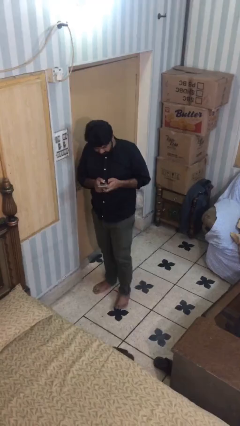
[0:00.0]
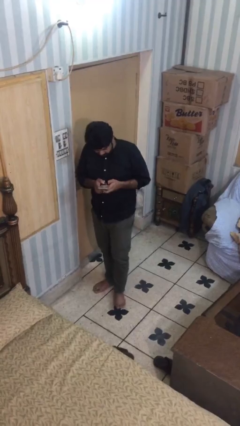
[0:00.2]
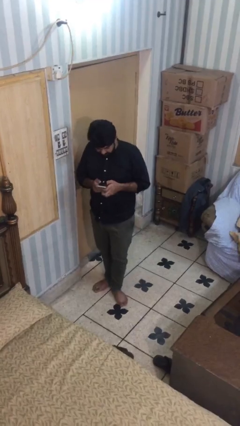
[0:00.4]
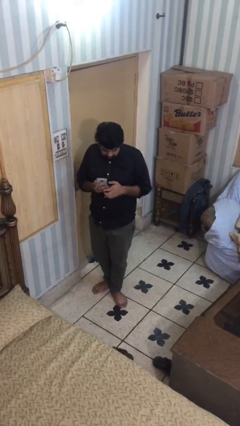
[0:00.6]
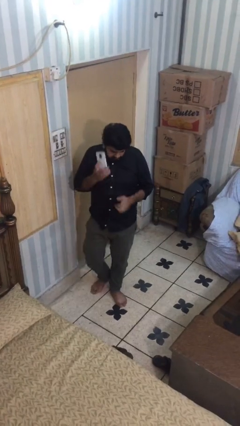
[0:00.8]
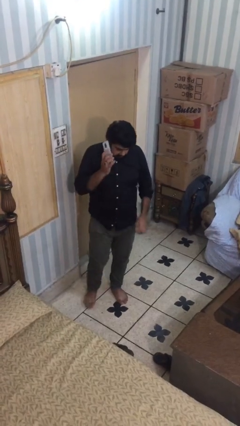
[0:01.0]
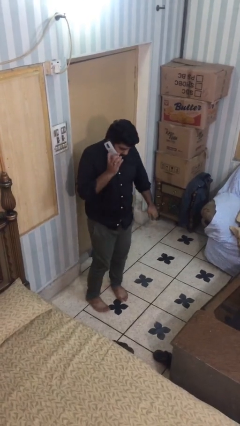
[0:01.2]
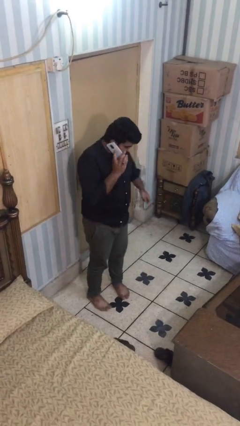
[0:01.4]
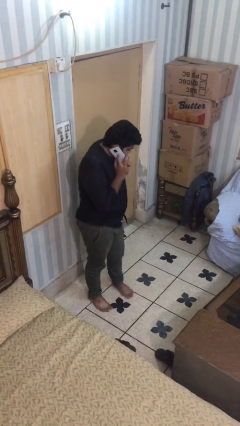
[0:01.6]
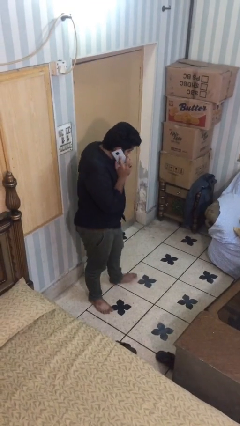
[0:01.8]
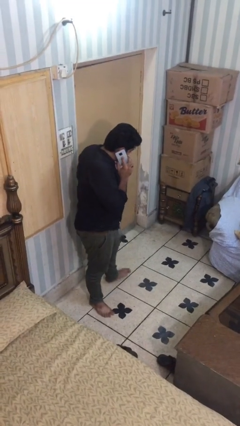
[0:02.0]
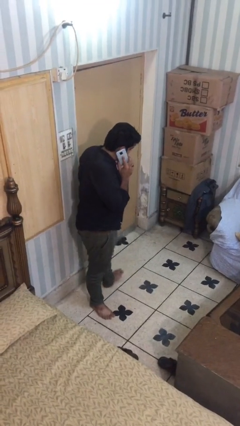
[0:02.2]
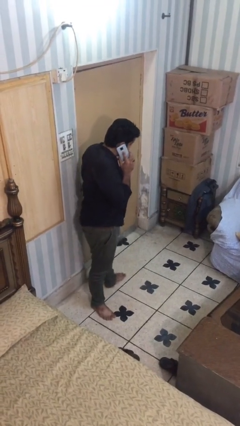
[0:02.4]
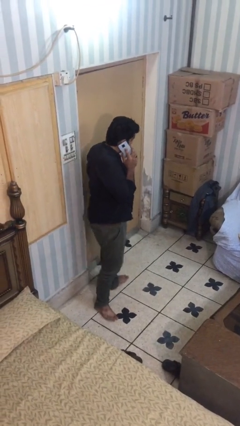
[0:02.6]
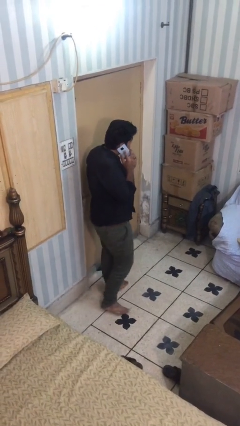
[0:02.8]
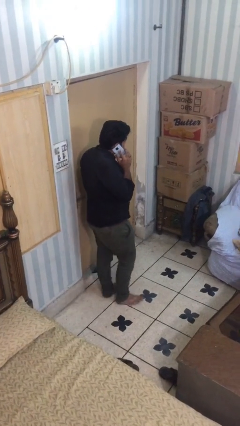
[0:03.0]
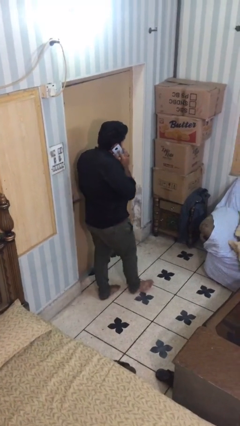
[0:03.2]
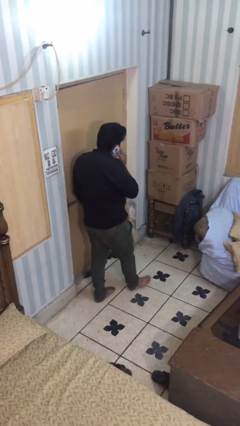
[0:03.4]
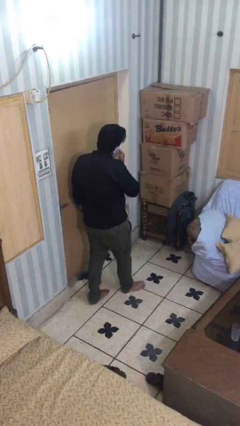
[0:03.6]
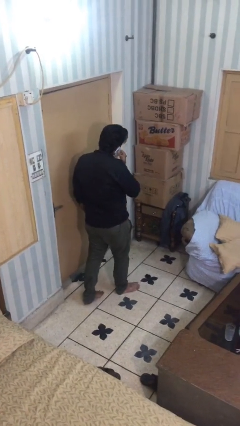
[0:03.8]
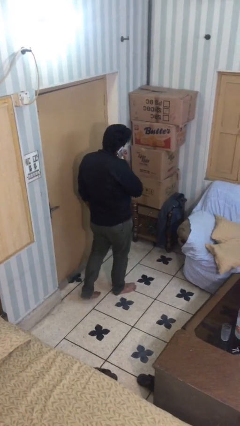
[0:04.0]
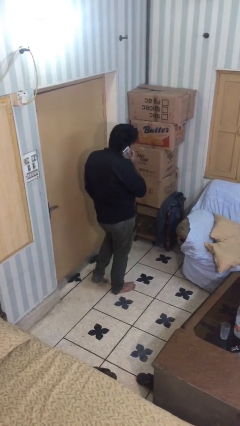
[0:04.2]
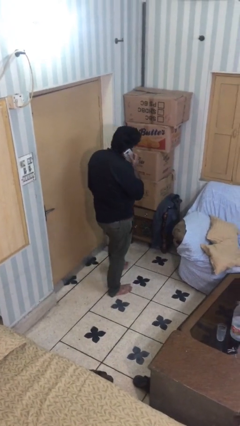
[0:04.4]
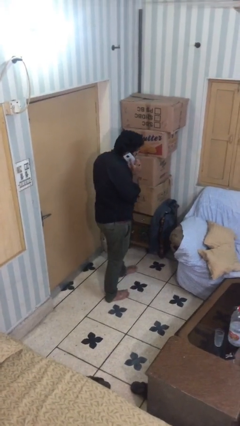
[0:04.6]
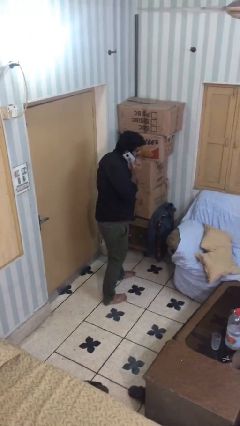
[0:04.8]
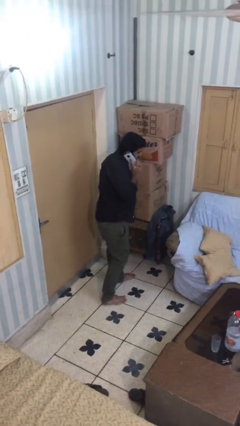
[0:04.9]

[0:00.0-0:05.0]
person talks on phone

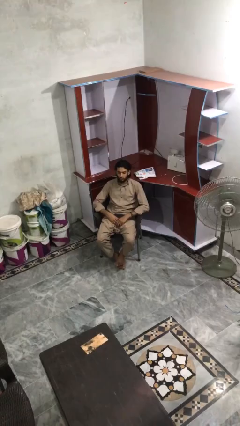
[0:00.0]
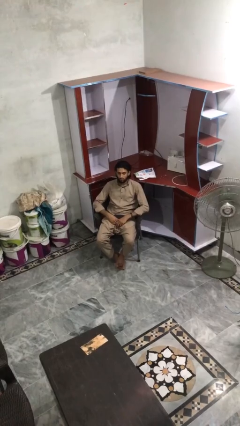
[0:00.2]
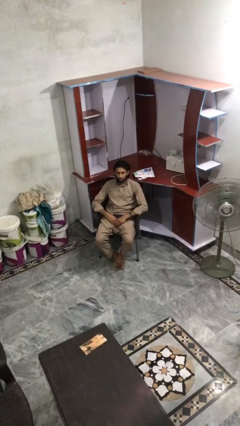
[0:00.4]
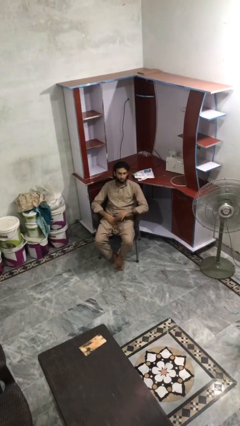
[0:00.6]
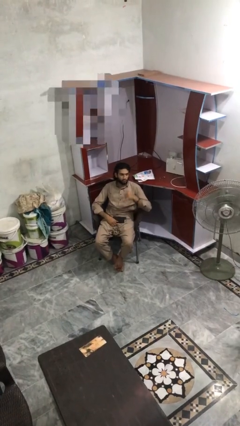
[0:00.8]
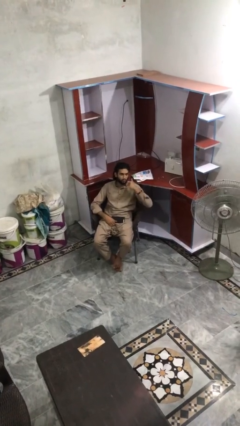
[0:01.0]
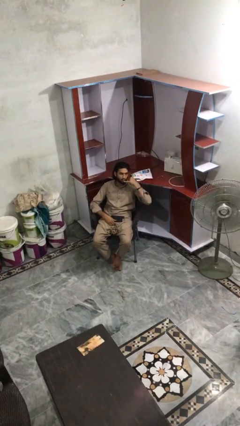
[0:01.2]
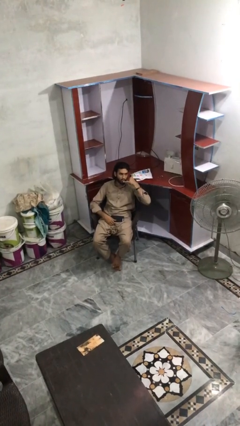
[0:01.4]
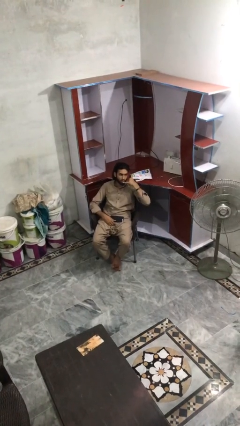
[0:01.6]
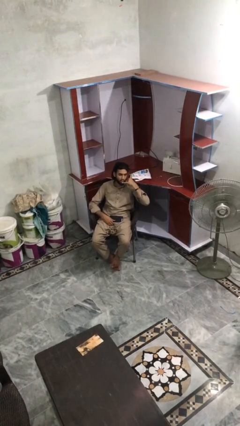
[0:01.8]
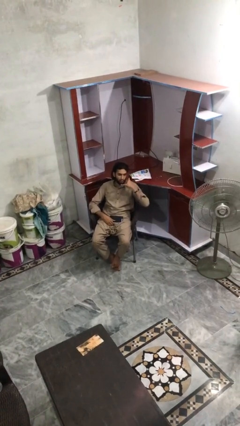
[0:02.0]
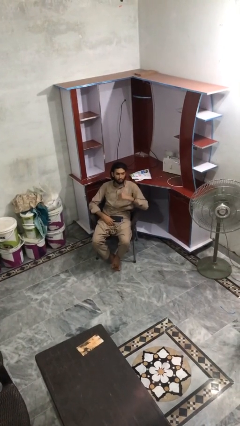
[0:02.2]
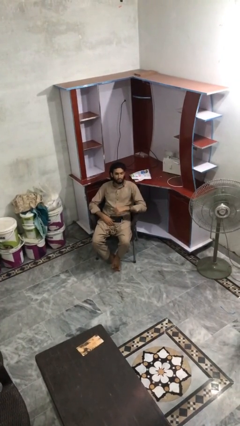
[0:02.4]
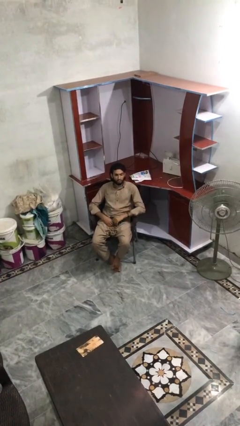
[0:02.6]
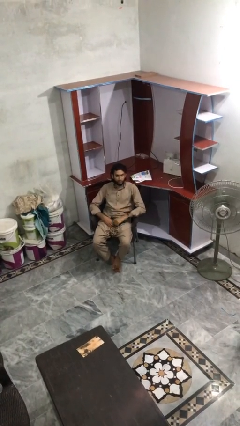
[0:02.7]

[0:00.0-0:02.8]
person gestures call me

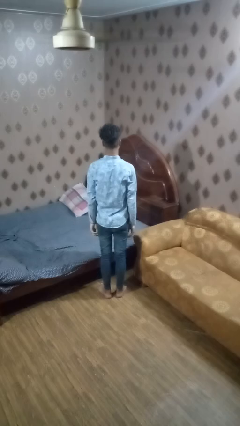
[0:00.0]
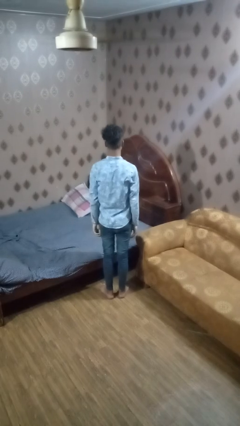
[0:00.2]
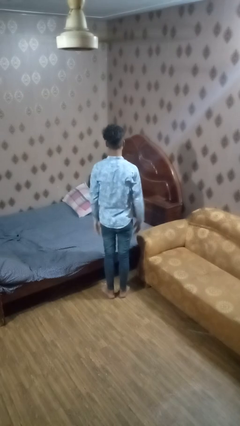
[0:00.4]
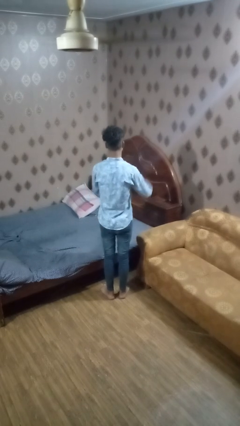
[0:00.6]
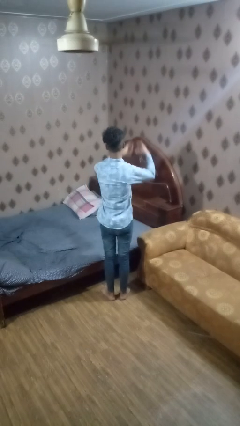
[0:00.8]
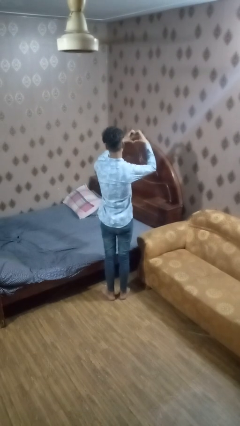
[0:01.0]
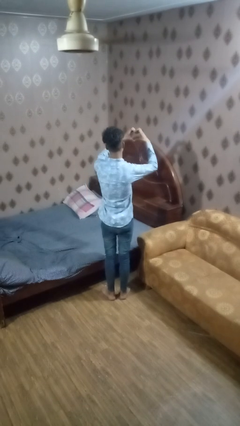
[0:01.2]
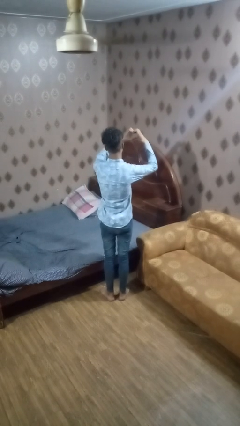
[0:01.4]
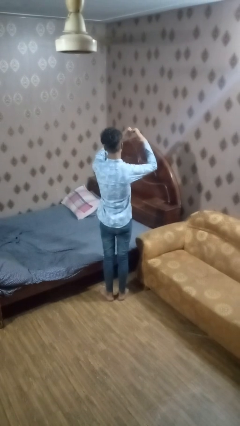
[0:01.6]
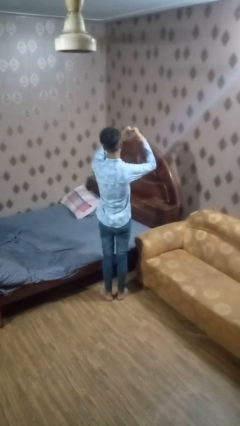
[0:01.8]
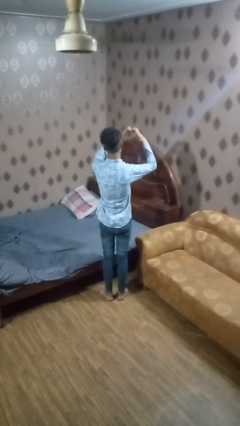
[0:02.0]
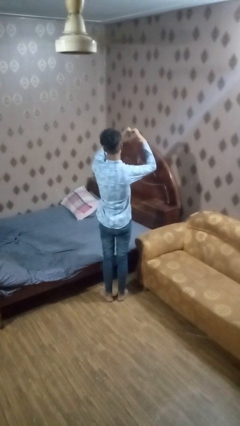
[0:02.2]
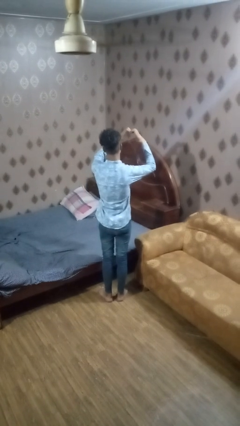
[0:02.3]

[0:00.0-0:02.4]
person gestures heart

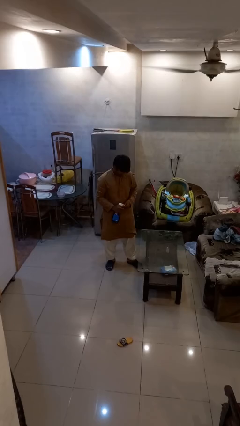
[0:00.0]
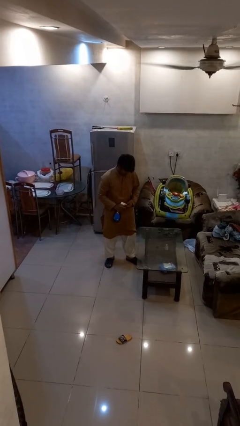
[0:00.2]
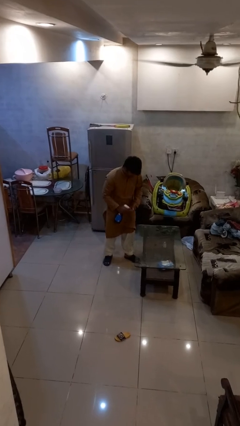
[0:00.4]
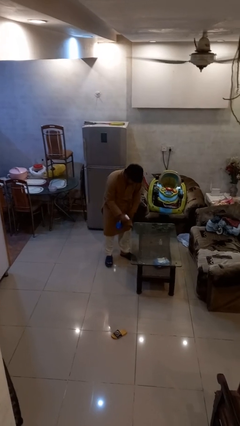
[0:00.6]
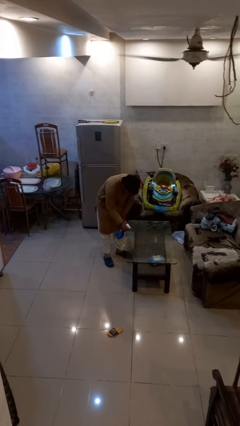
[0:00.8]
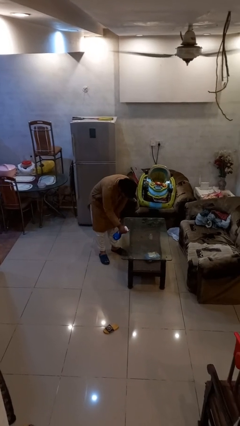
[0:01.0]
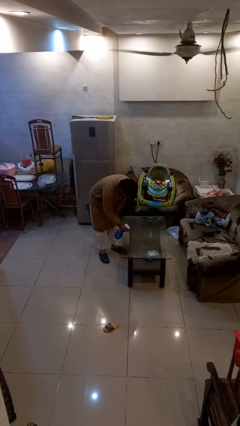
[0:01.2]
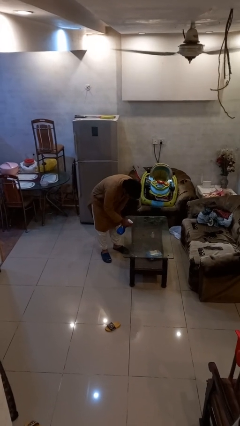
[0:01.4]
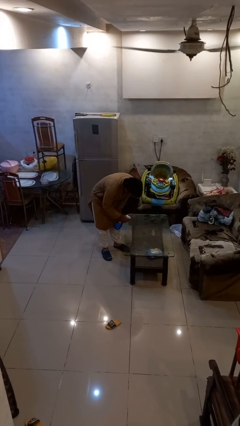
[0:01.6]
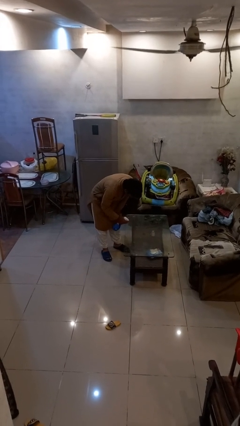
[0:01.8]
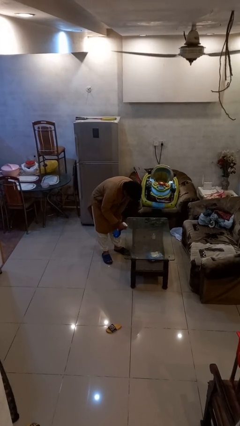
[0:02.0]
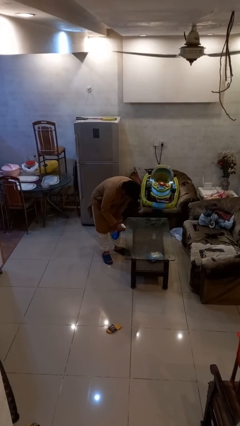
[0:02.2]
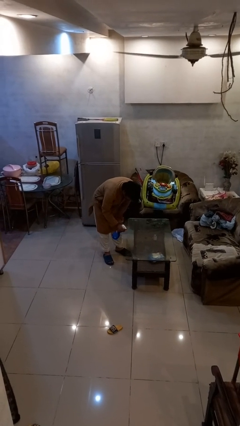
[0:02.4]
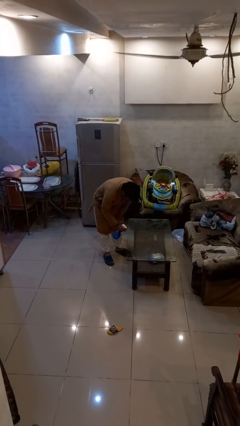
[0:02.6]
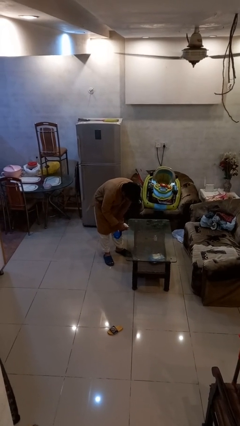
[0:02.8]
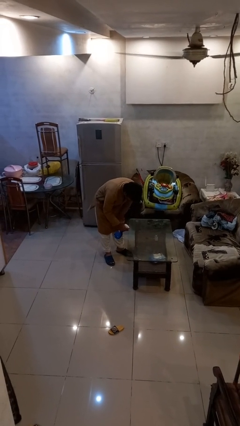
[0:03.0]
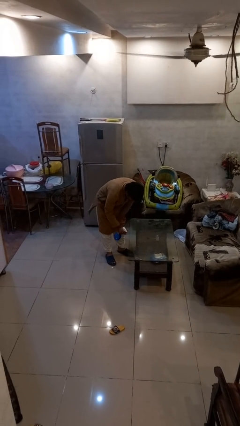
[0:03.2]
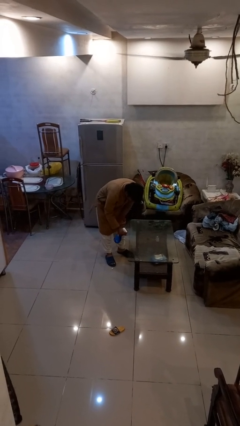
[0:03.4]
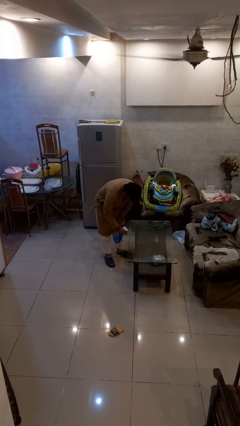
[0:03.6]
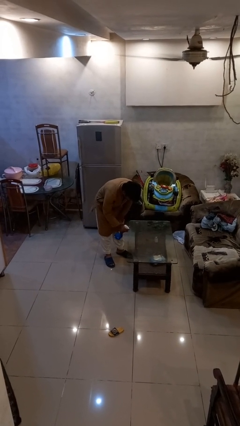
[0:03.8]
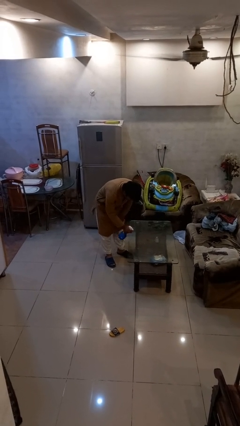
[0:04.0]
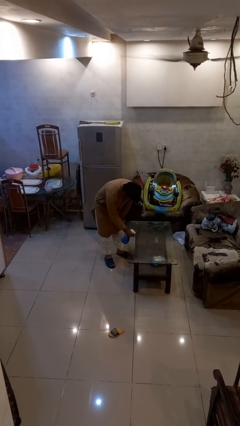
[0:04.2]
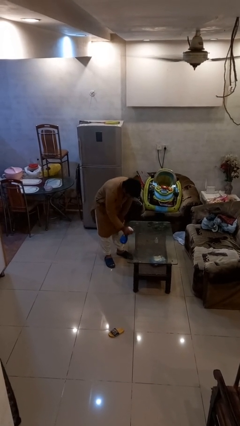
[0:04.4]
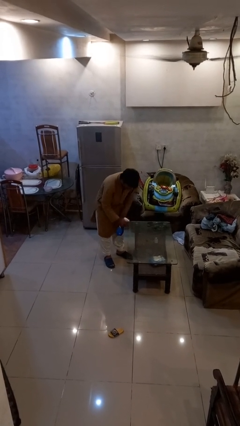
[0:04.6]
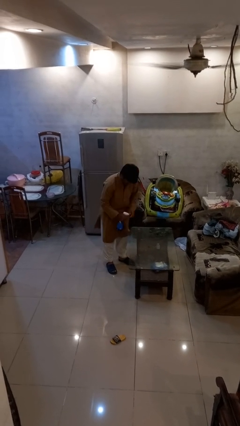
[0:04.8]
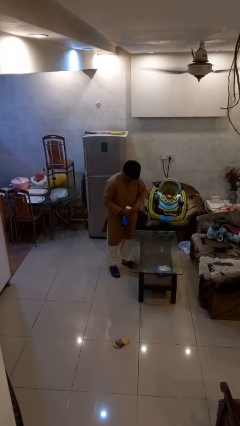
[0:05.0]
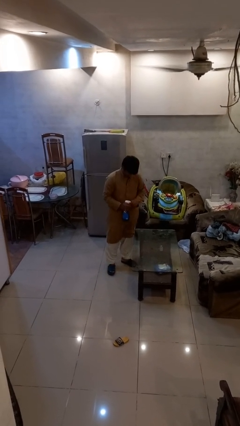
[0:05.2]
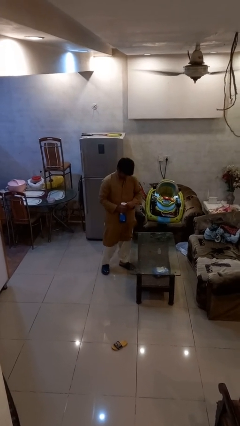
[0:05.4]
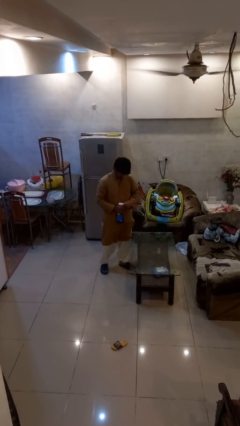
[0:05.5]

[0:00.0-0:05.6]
person sprays from bottle

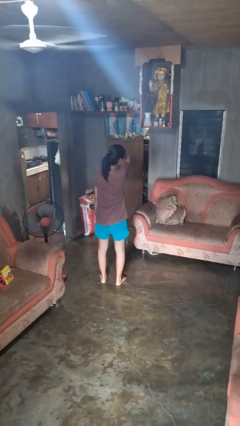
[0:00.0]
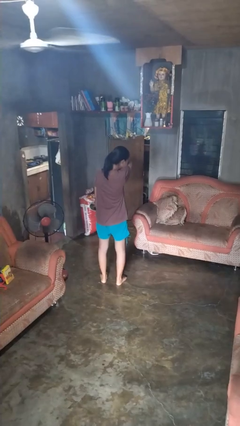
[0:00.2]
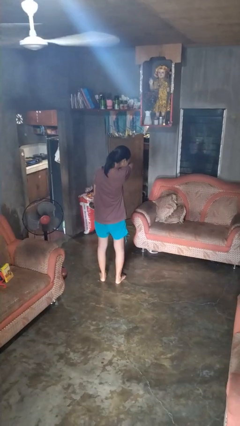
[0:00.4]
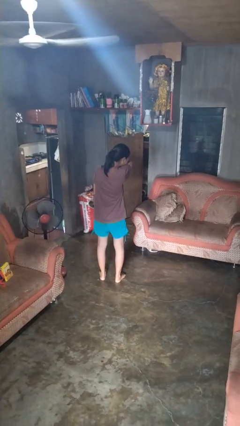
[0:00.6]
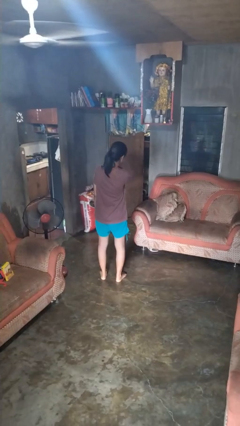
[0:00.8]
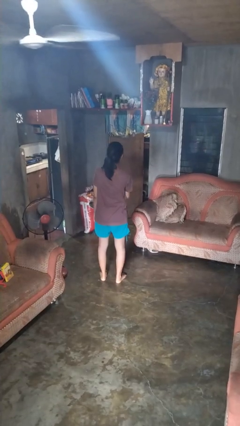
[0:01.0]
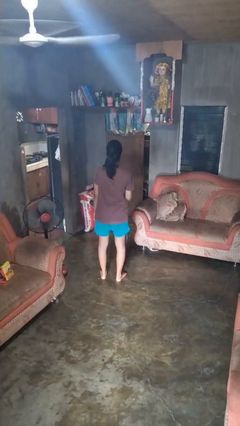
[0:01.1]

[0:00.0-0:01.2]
person sneezes into arm

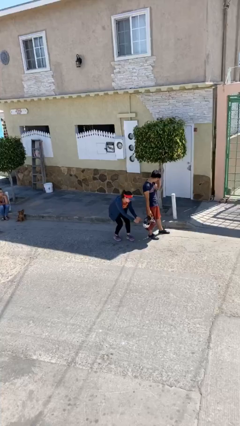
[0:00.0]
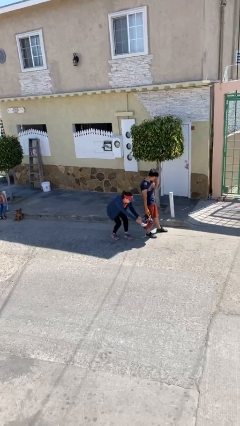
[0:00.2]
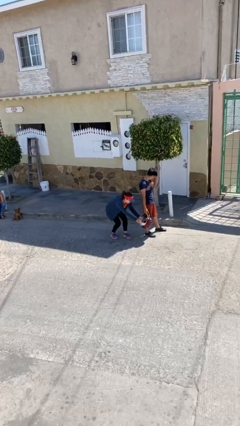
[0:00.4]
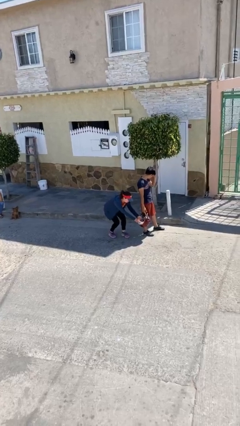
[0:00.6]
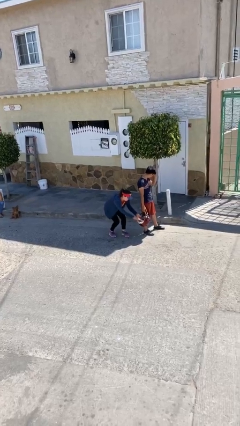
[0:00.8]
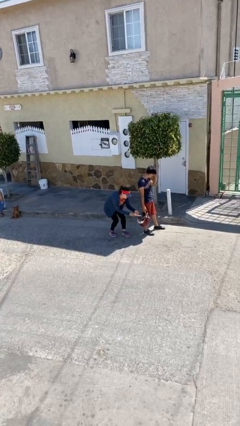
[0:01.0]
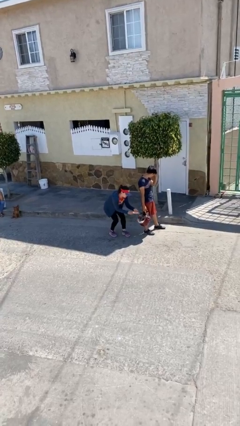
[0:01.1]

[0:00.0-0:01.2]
person steals object from person
